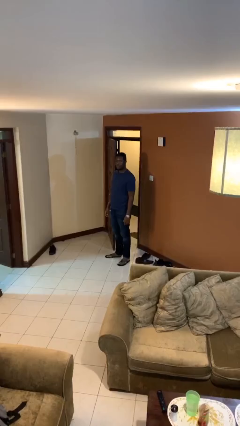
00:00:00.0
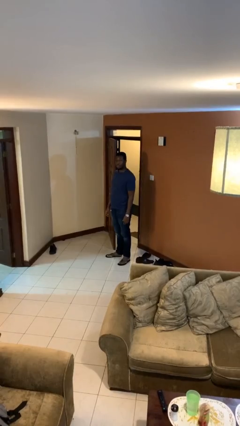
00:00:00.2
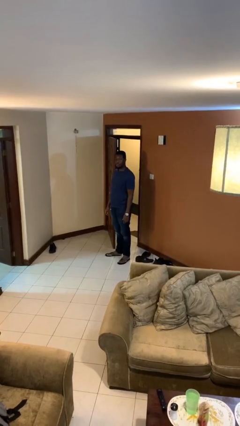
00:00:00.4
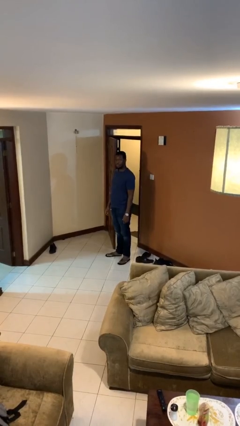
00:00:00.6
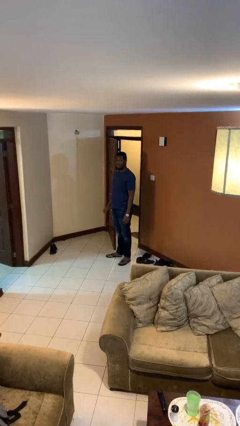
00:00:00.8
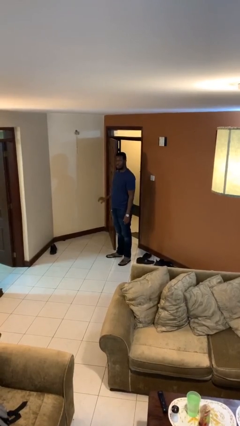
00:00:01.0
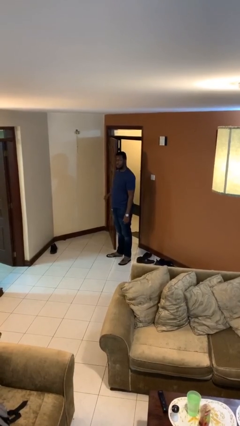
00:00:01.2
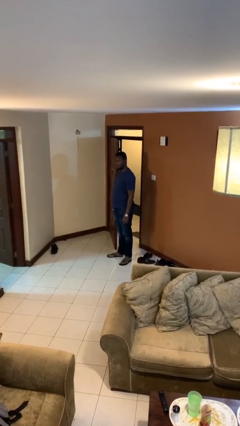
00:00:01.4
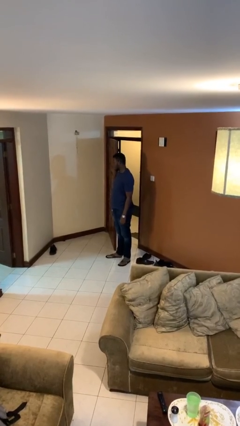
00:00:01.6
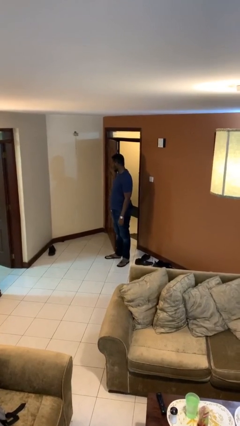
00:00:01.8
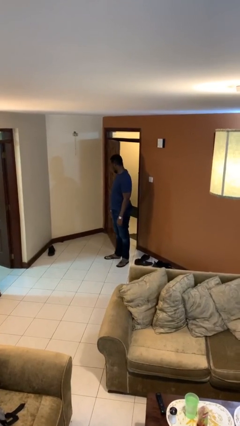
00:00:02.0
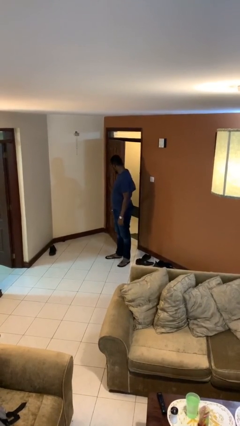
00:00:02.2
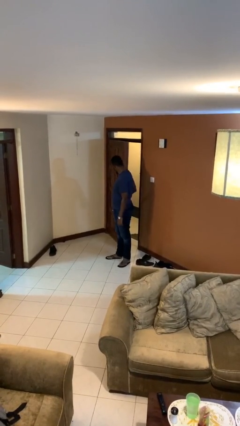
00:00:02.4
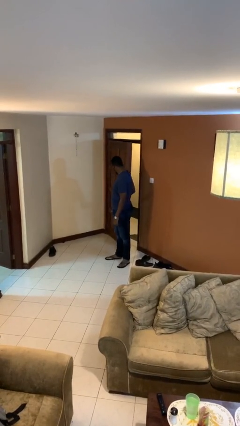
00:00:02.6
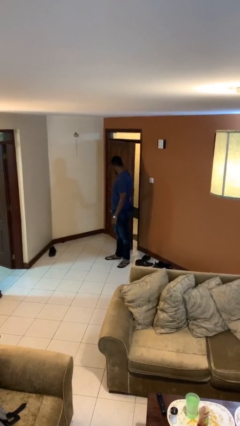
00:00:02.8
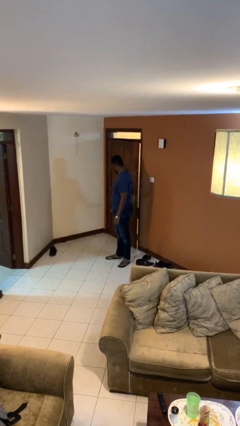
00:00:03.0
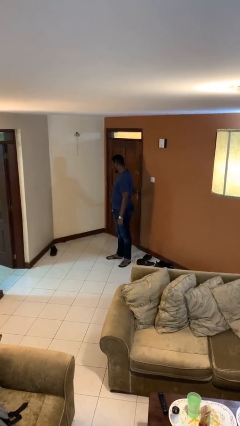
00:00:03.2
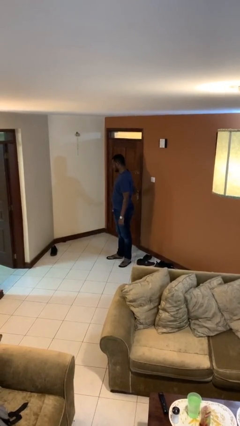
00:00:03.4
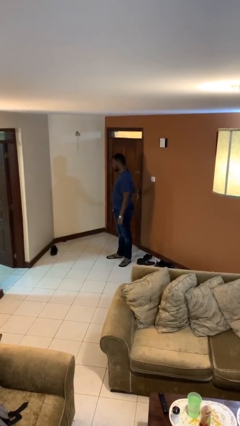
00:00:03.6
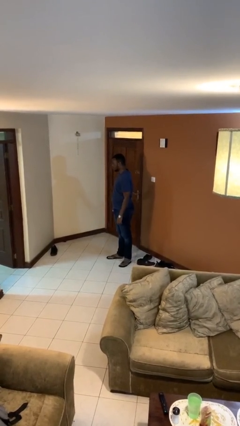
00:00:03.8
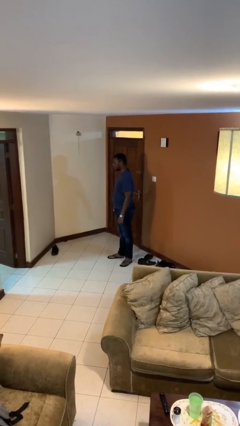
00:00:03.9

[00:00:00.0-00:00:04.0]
person closes facility door

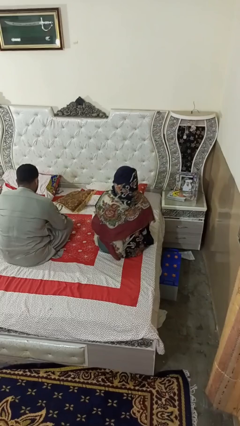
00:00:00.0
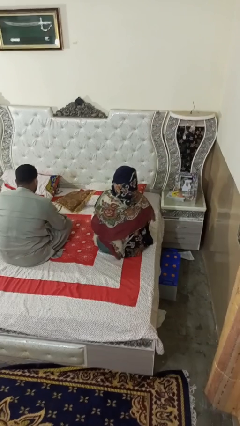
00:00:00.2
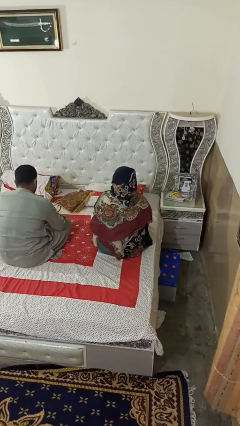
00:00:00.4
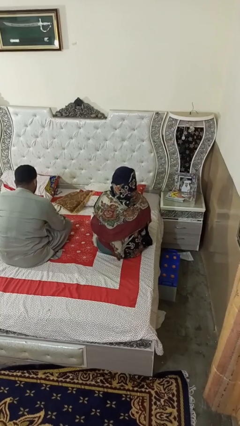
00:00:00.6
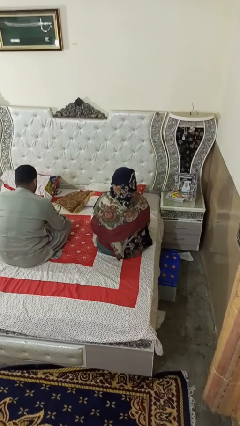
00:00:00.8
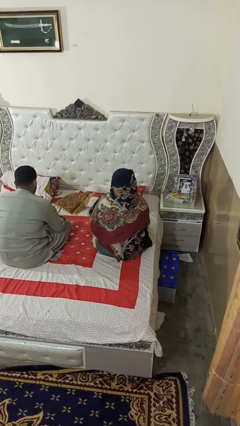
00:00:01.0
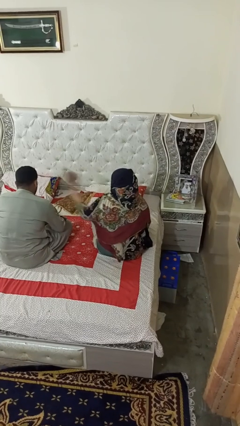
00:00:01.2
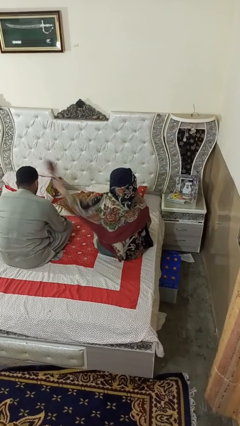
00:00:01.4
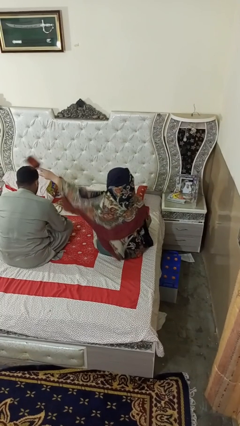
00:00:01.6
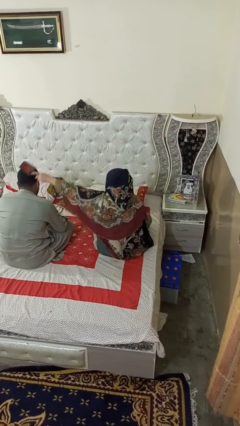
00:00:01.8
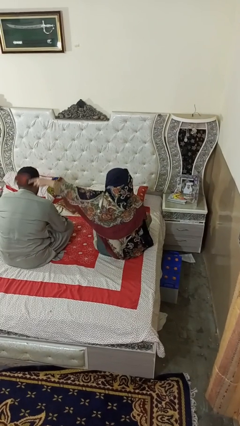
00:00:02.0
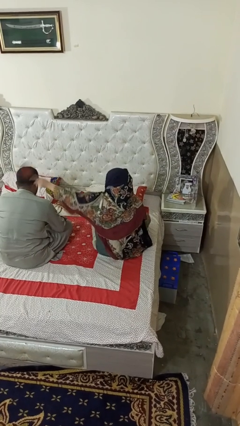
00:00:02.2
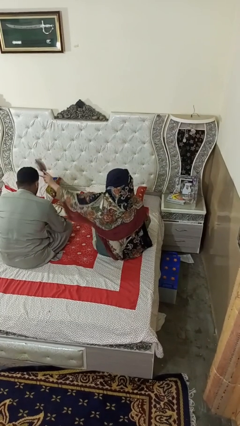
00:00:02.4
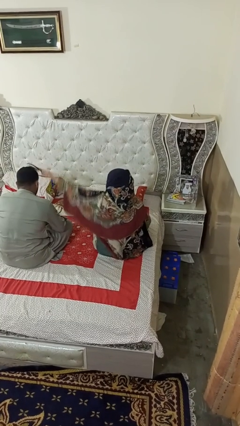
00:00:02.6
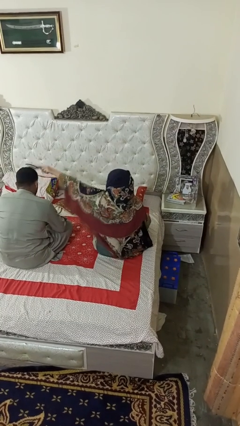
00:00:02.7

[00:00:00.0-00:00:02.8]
person brushes hair of person

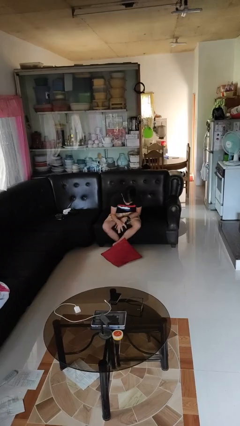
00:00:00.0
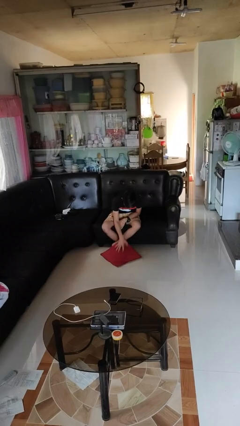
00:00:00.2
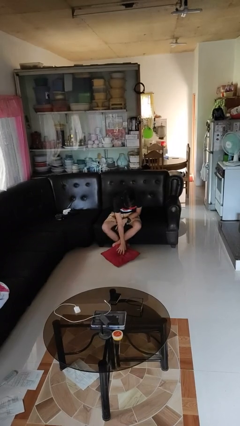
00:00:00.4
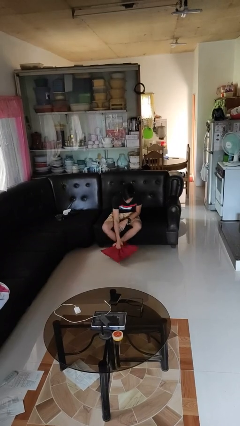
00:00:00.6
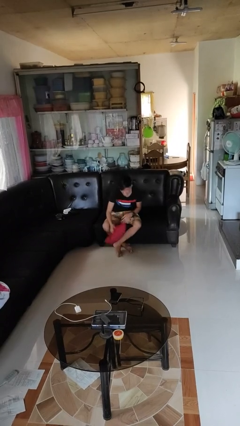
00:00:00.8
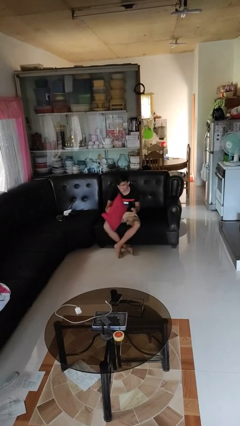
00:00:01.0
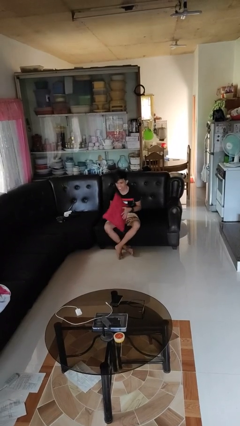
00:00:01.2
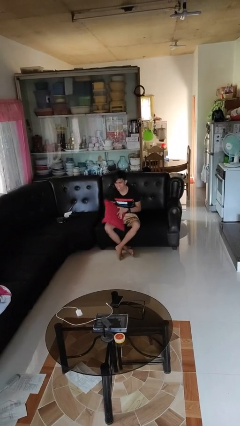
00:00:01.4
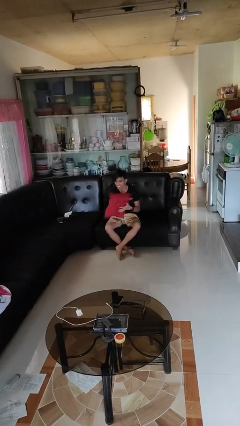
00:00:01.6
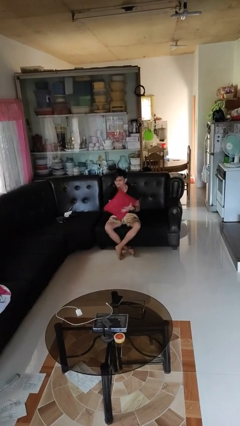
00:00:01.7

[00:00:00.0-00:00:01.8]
person picks up object from floor

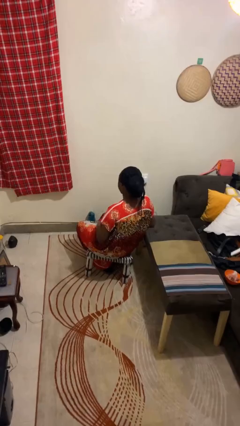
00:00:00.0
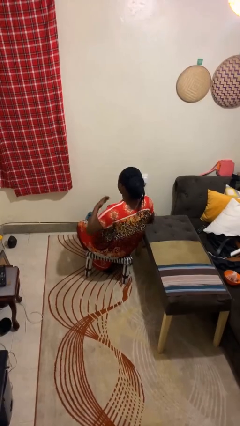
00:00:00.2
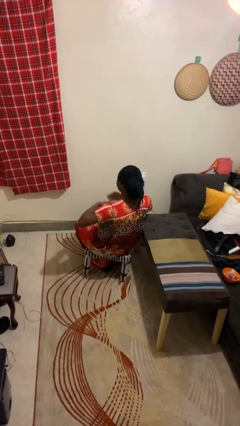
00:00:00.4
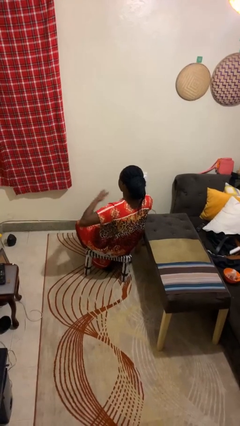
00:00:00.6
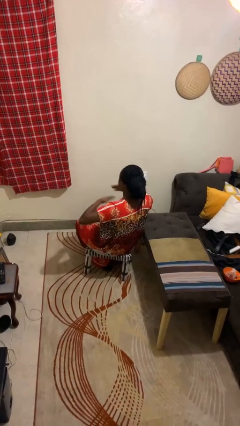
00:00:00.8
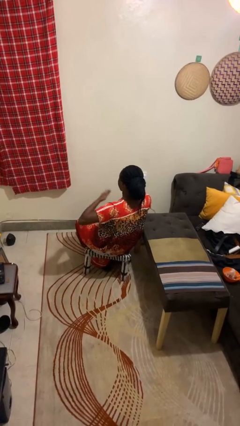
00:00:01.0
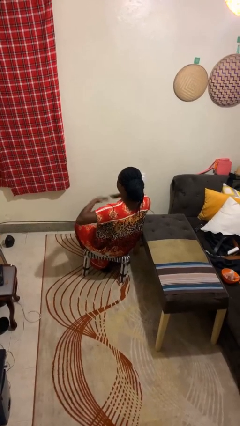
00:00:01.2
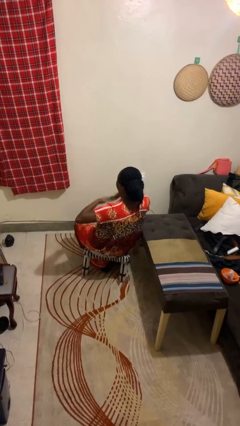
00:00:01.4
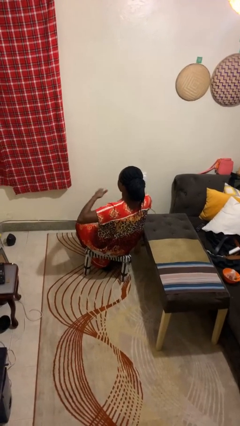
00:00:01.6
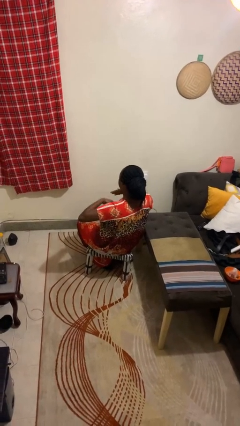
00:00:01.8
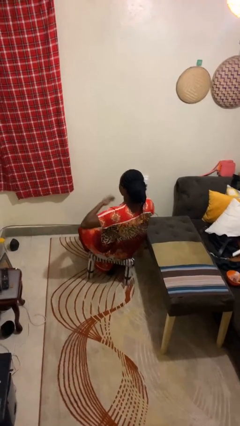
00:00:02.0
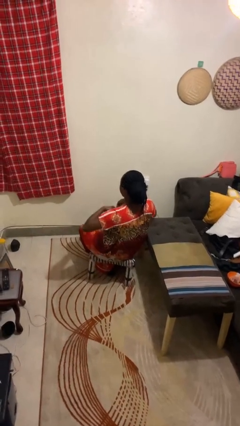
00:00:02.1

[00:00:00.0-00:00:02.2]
person drums on chest

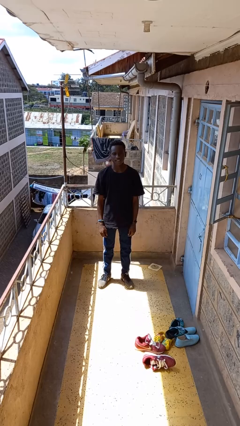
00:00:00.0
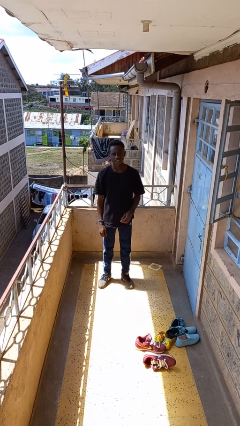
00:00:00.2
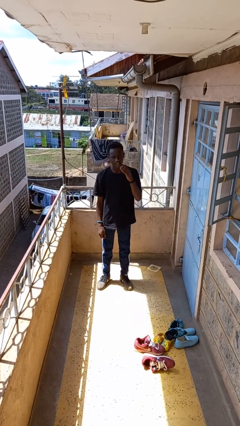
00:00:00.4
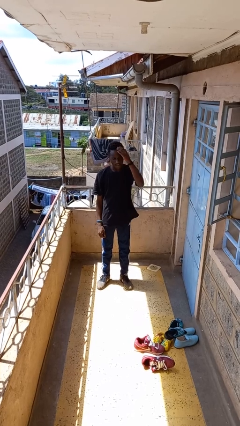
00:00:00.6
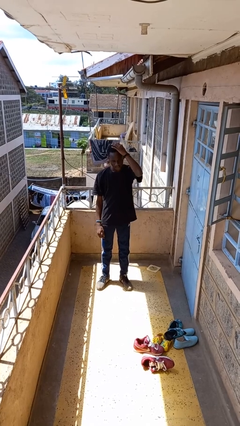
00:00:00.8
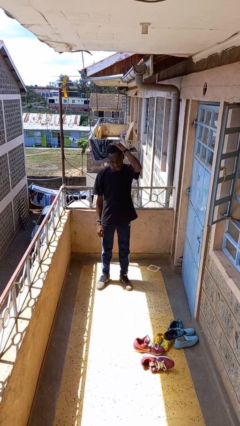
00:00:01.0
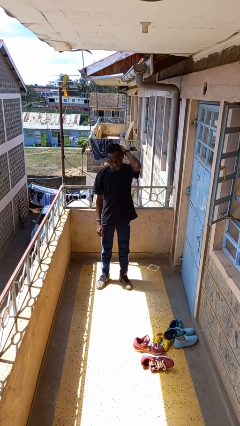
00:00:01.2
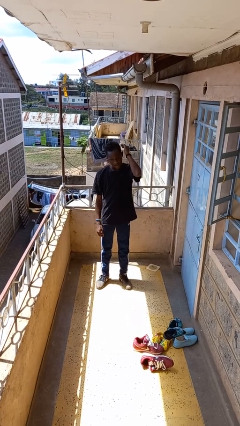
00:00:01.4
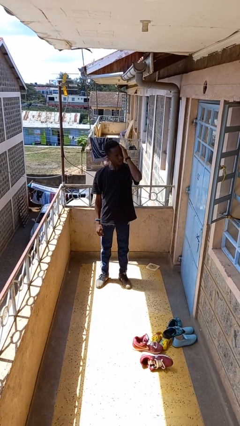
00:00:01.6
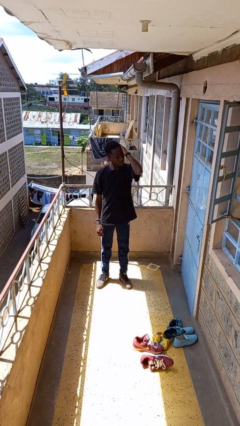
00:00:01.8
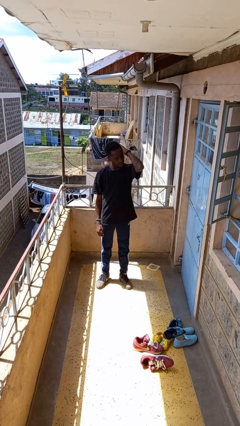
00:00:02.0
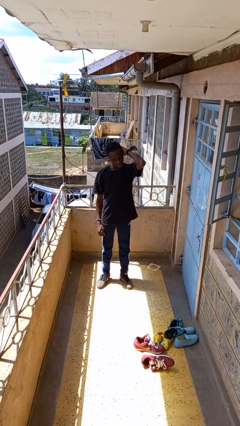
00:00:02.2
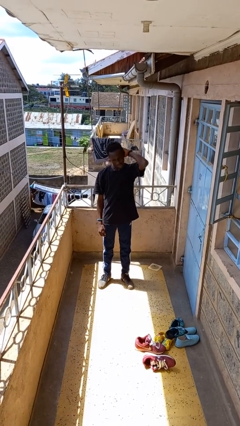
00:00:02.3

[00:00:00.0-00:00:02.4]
person strokes hair

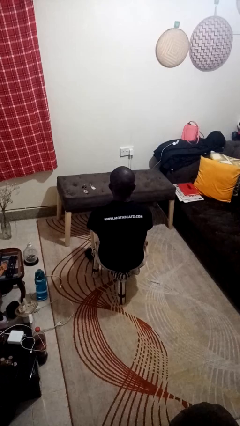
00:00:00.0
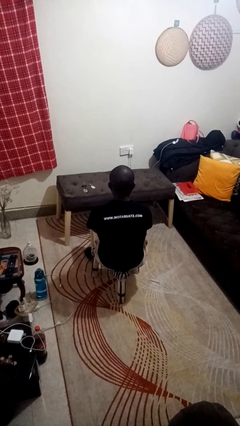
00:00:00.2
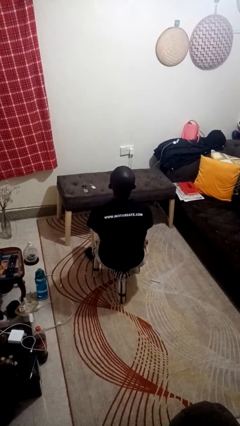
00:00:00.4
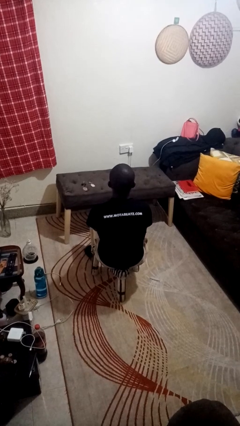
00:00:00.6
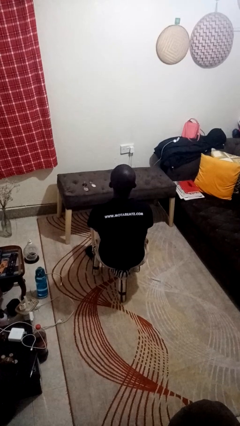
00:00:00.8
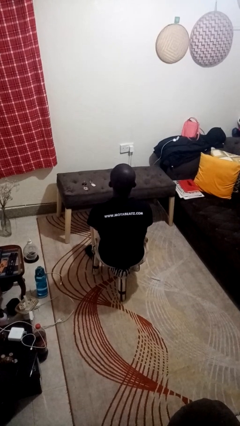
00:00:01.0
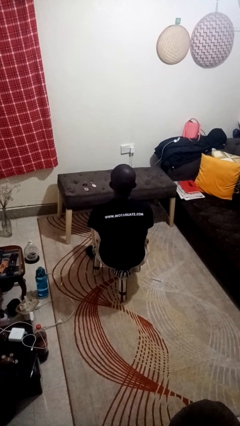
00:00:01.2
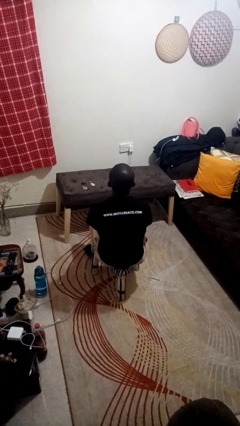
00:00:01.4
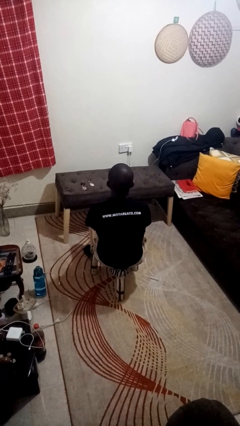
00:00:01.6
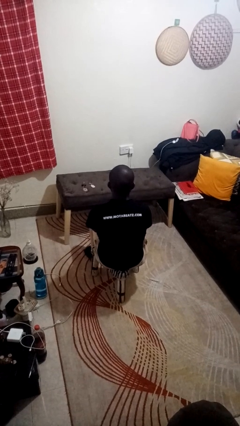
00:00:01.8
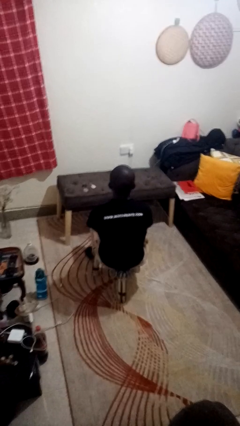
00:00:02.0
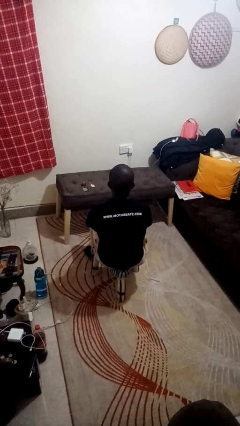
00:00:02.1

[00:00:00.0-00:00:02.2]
person nods head

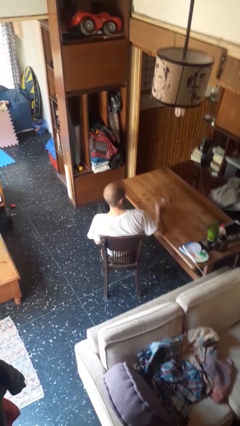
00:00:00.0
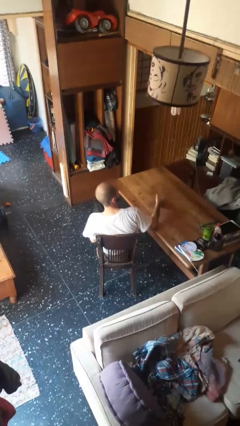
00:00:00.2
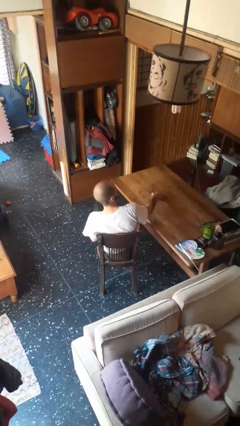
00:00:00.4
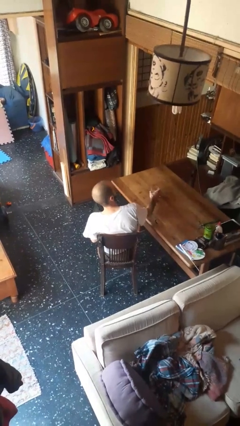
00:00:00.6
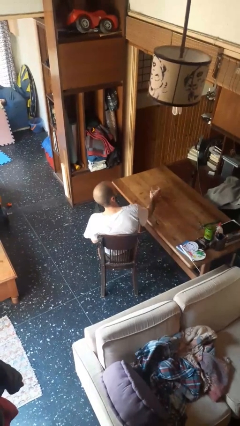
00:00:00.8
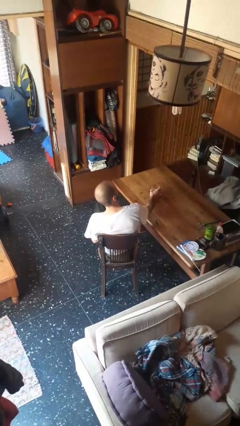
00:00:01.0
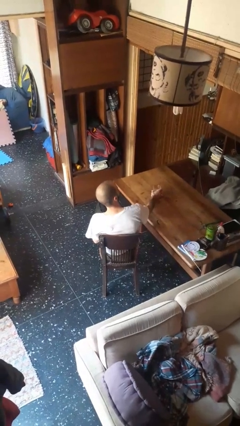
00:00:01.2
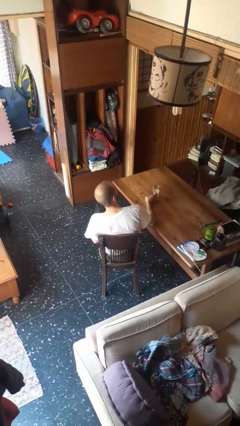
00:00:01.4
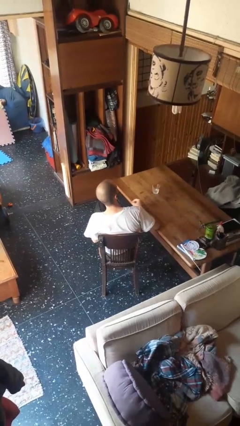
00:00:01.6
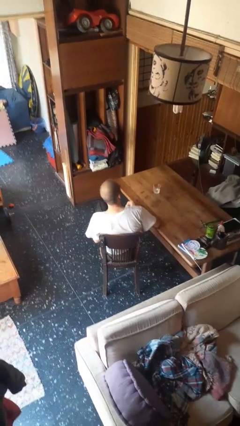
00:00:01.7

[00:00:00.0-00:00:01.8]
person sets upright glass
